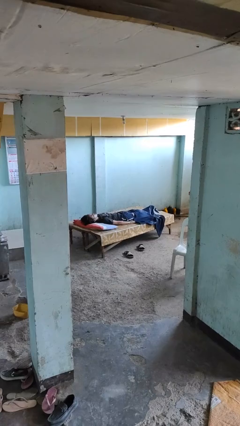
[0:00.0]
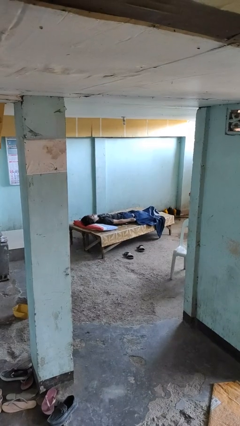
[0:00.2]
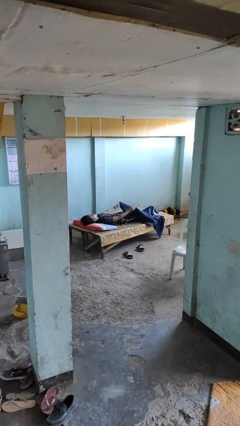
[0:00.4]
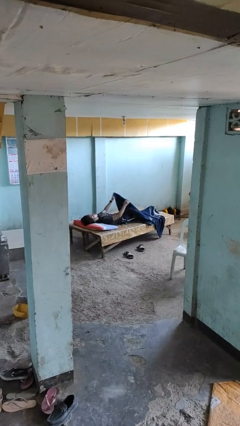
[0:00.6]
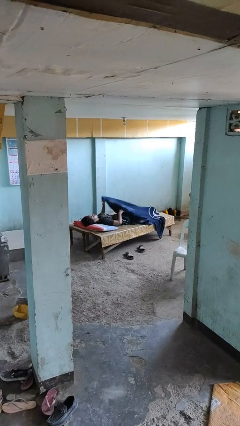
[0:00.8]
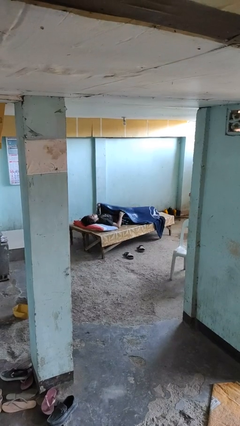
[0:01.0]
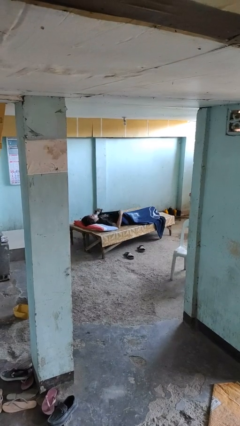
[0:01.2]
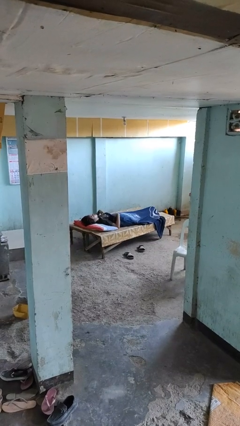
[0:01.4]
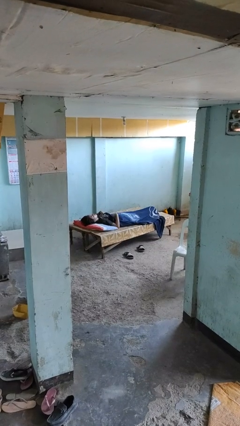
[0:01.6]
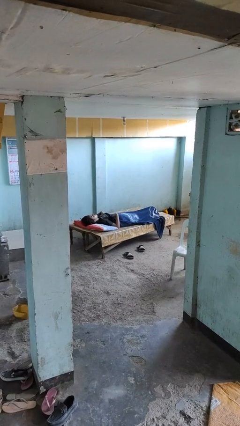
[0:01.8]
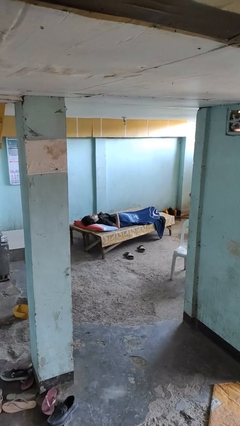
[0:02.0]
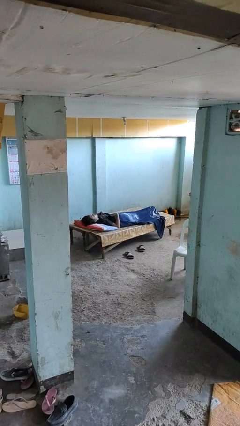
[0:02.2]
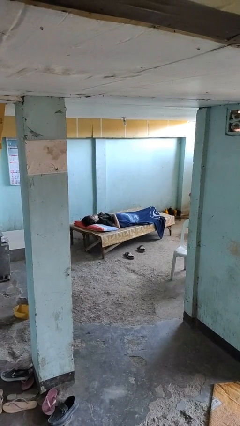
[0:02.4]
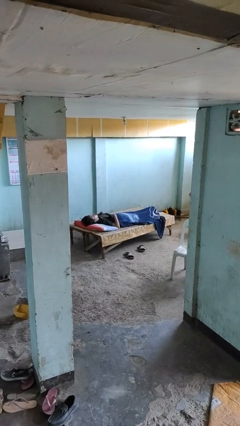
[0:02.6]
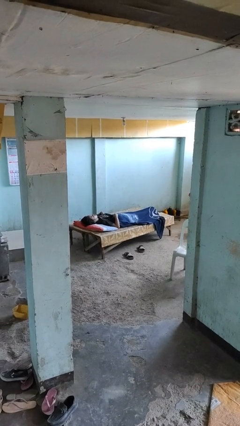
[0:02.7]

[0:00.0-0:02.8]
person covers with blanket

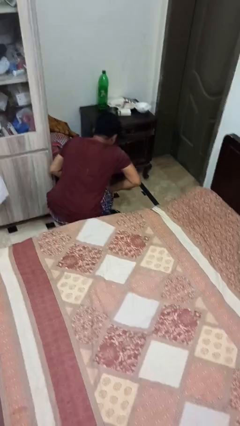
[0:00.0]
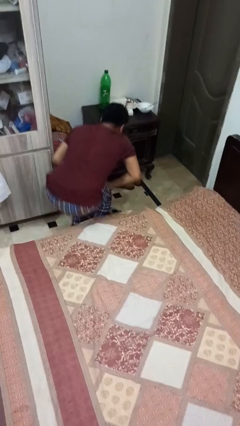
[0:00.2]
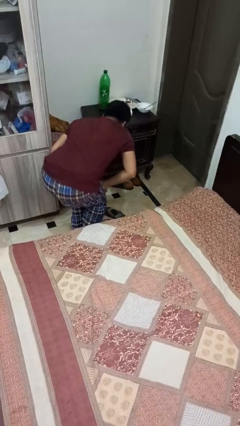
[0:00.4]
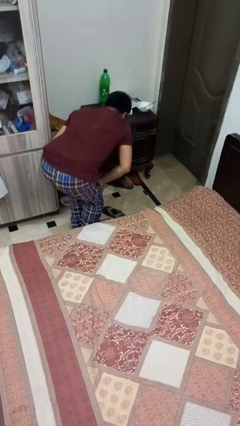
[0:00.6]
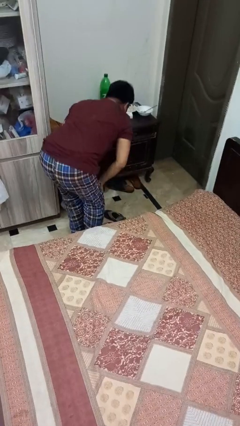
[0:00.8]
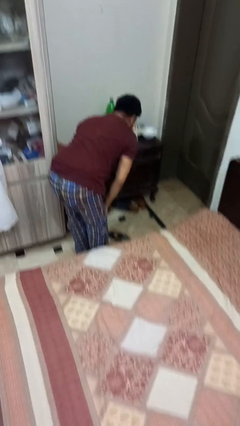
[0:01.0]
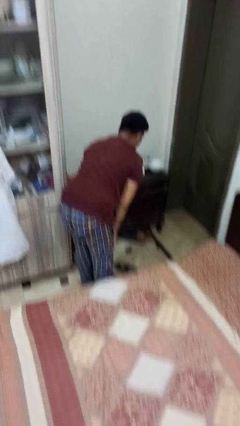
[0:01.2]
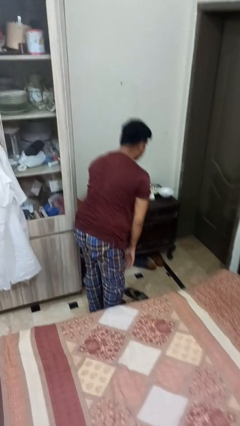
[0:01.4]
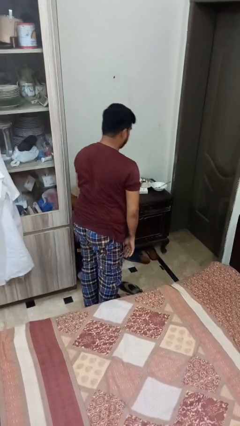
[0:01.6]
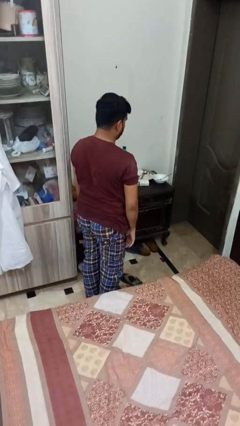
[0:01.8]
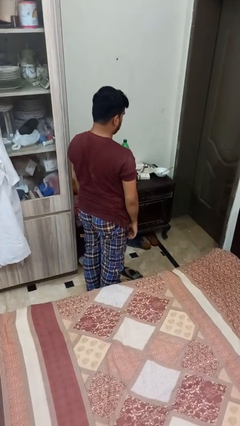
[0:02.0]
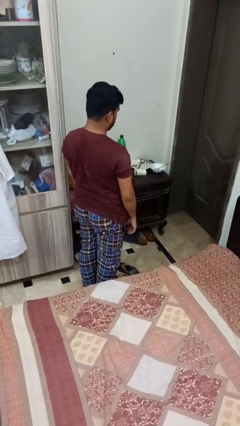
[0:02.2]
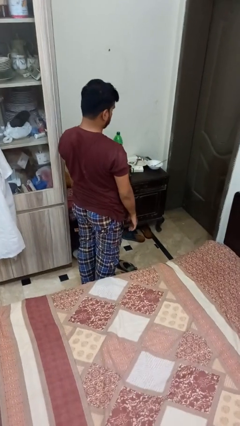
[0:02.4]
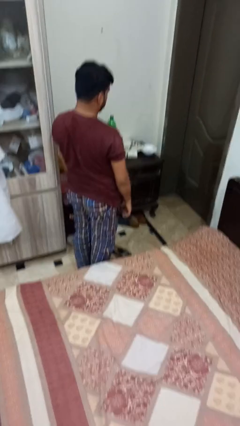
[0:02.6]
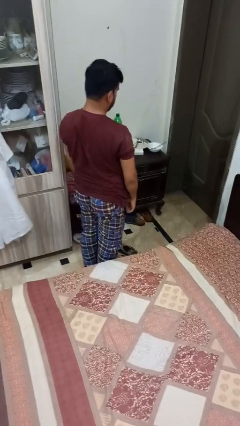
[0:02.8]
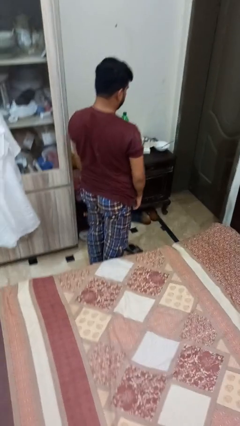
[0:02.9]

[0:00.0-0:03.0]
person stands up from floor

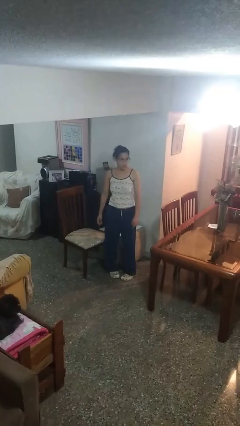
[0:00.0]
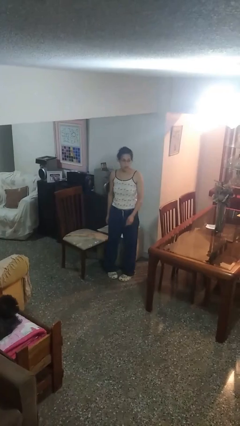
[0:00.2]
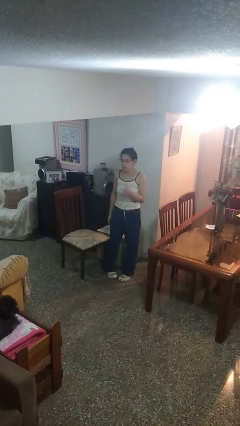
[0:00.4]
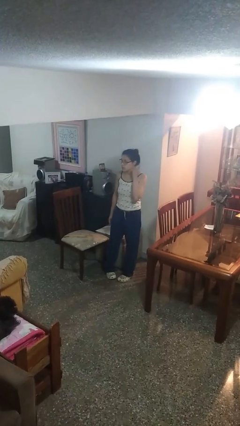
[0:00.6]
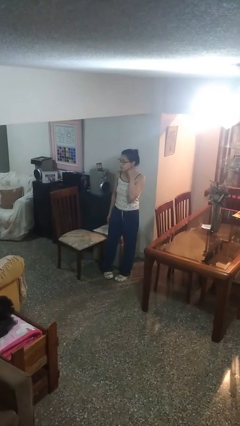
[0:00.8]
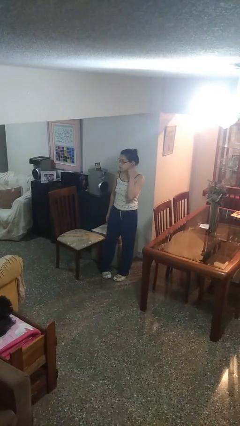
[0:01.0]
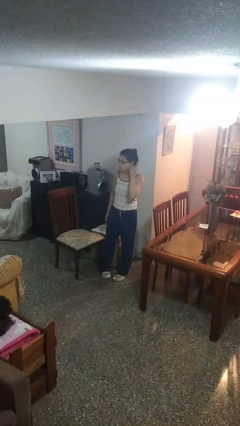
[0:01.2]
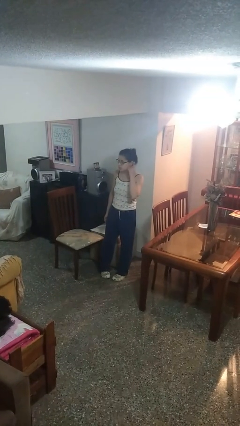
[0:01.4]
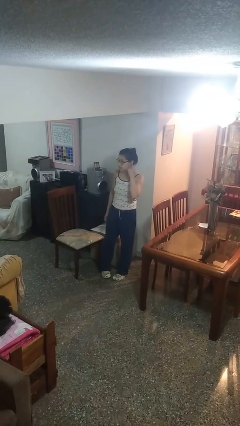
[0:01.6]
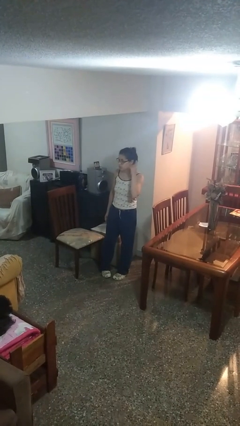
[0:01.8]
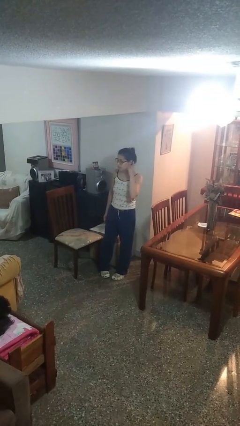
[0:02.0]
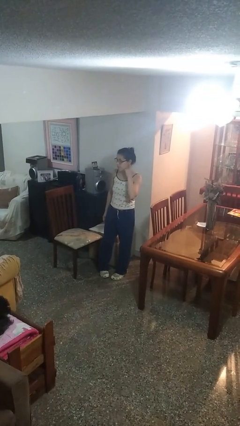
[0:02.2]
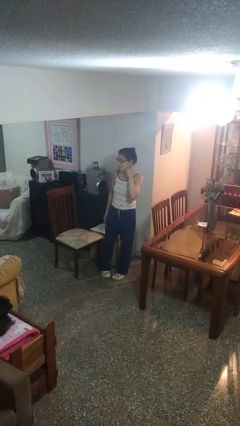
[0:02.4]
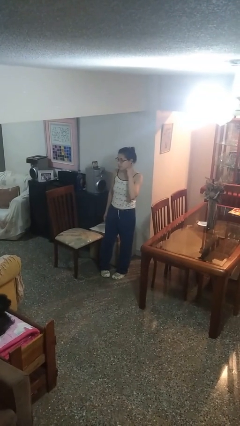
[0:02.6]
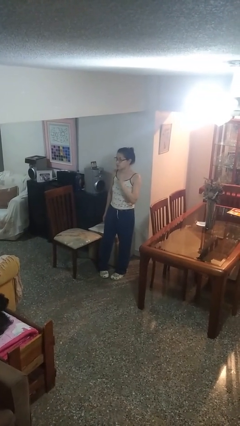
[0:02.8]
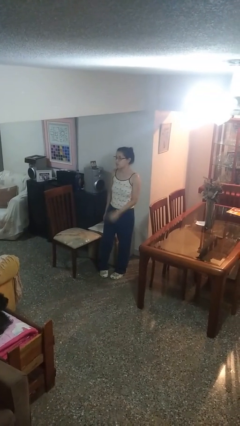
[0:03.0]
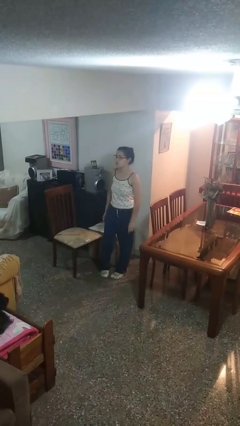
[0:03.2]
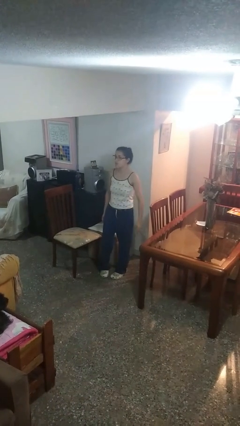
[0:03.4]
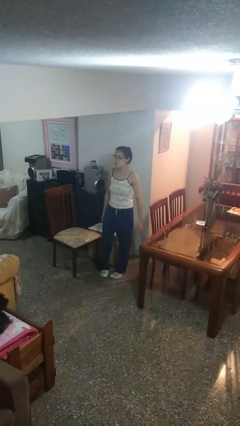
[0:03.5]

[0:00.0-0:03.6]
person gestures listen closely

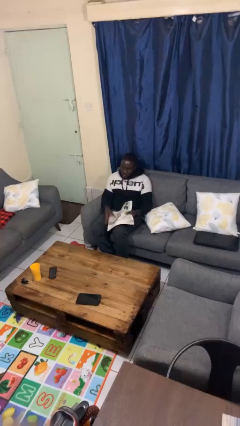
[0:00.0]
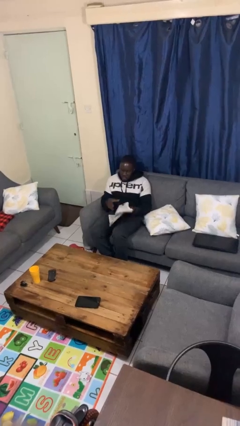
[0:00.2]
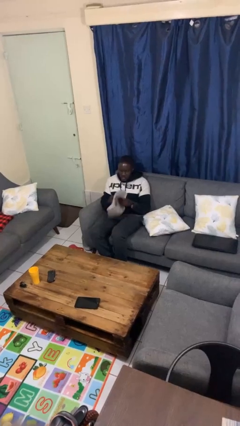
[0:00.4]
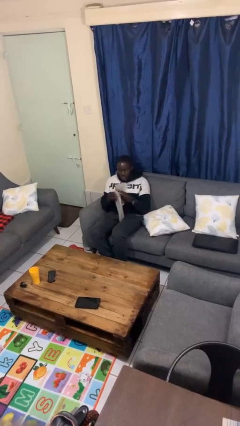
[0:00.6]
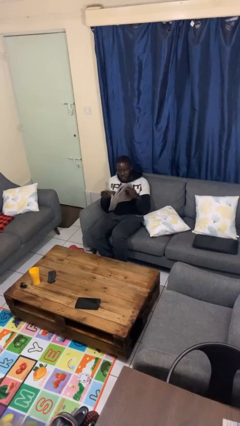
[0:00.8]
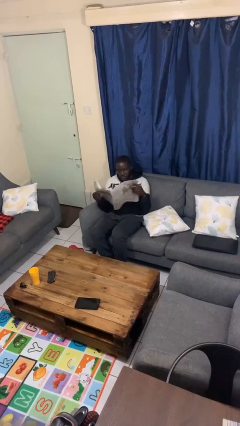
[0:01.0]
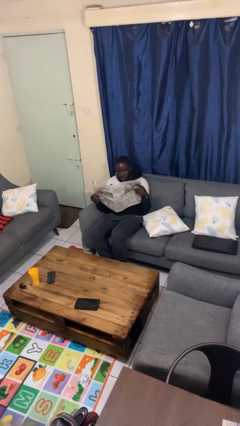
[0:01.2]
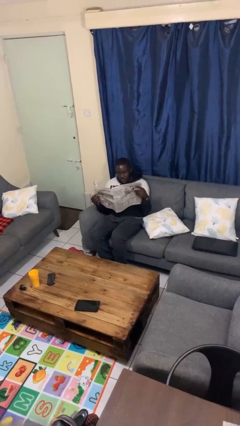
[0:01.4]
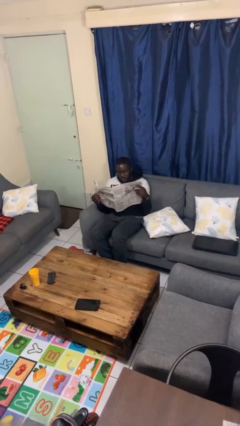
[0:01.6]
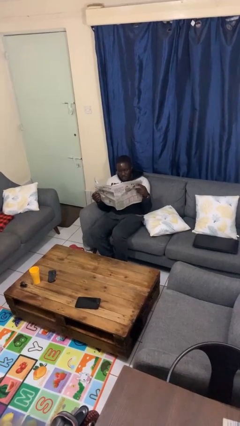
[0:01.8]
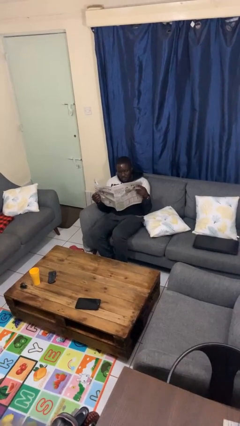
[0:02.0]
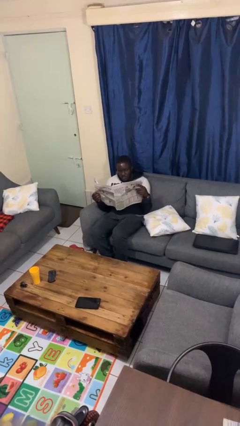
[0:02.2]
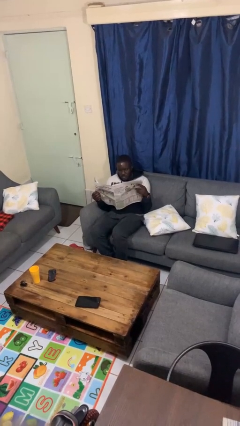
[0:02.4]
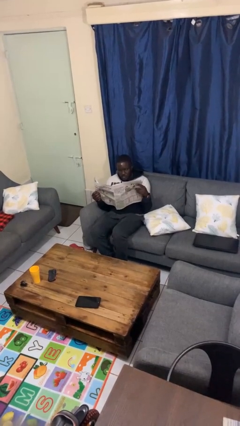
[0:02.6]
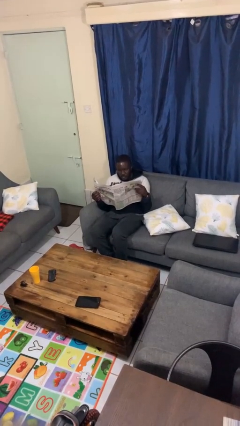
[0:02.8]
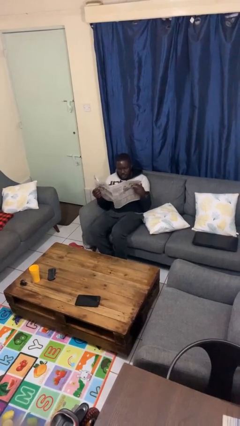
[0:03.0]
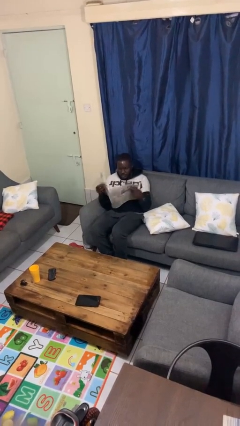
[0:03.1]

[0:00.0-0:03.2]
person reads newspaper

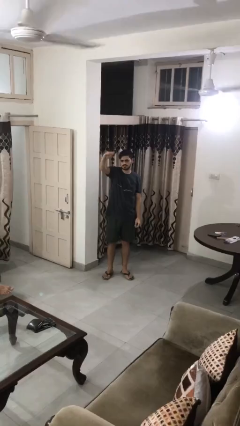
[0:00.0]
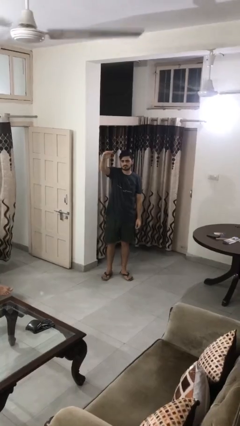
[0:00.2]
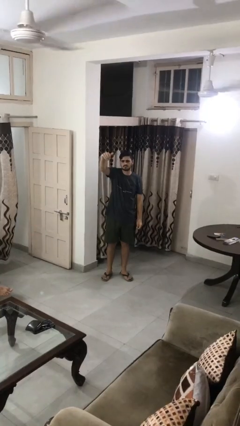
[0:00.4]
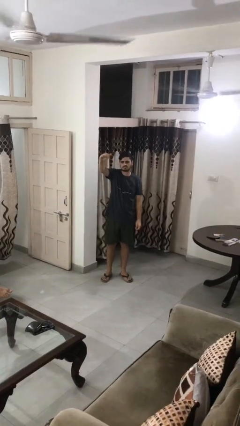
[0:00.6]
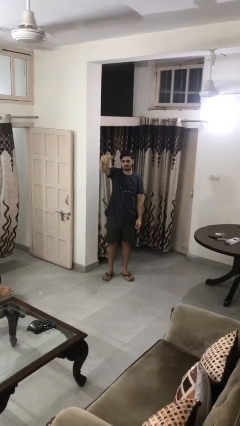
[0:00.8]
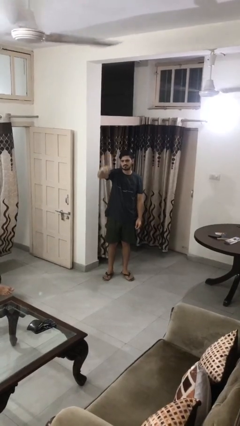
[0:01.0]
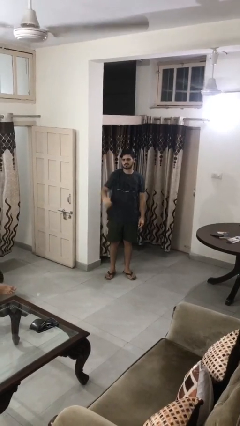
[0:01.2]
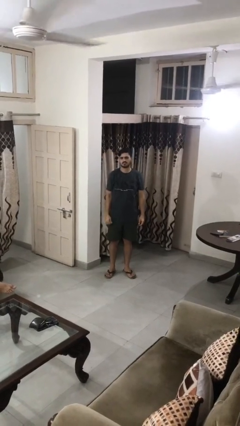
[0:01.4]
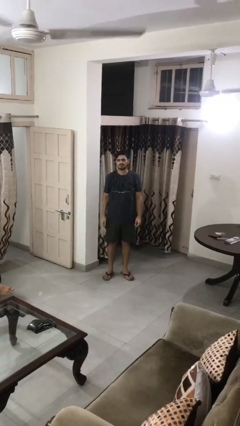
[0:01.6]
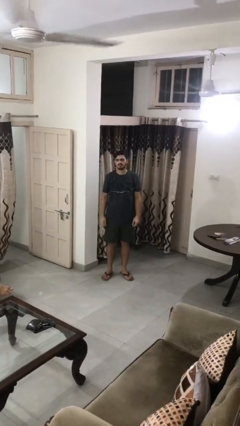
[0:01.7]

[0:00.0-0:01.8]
person gestures come here

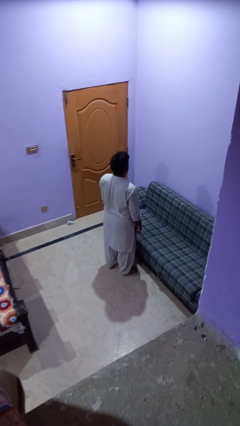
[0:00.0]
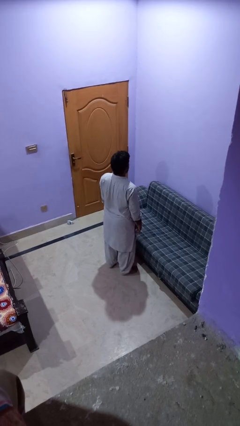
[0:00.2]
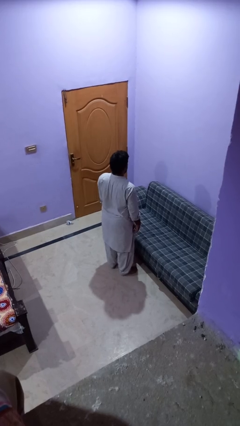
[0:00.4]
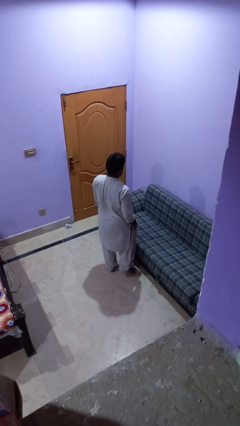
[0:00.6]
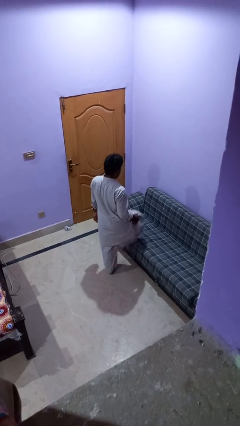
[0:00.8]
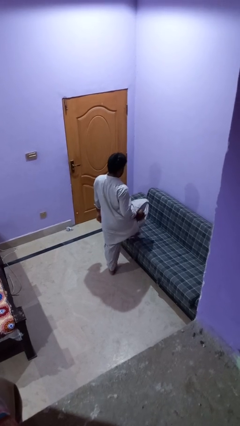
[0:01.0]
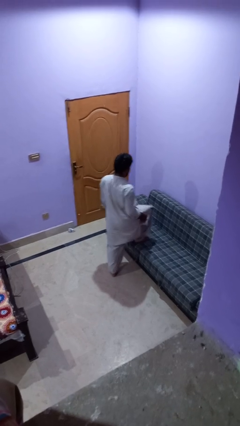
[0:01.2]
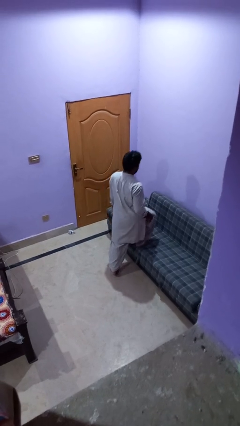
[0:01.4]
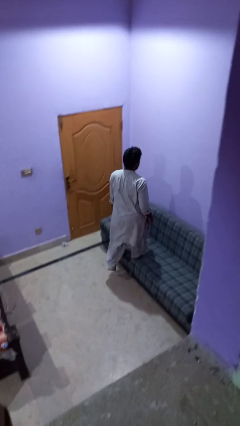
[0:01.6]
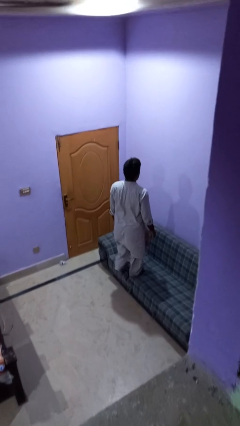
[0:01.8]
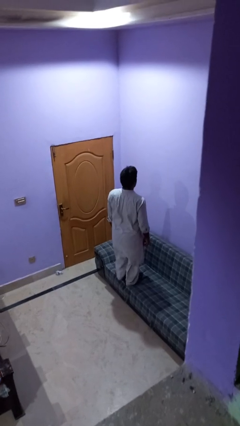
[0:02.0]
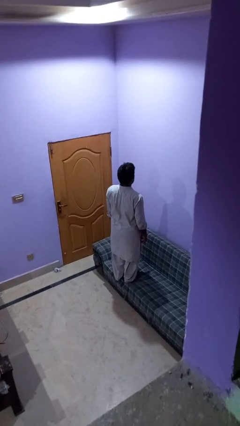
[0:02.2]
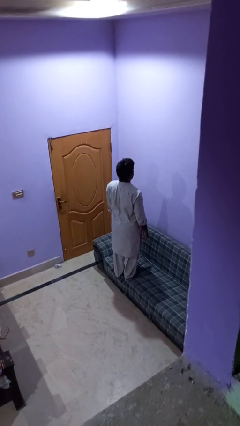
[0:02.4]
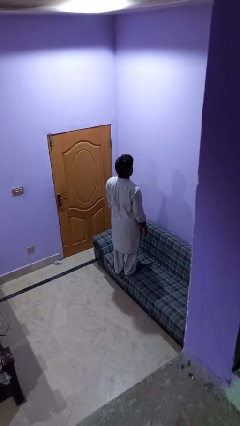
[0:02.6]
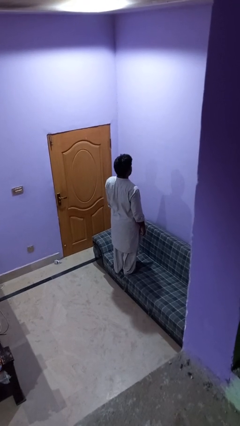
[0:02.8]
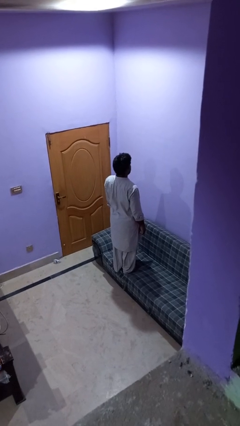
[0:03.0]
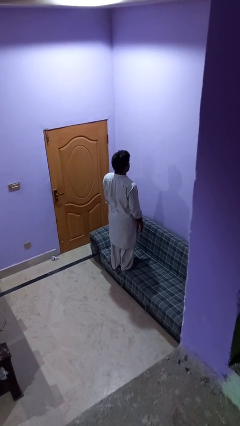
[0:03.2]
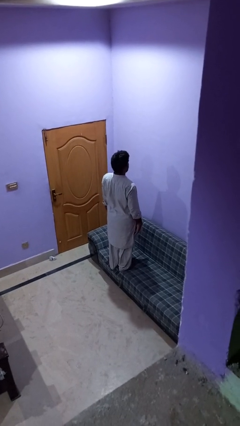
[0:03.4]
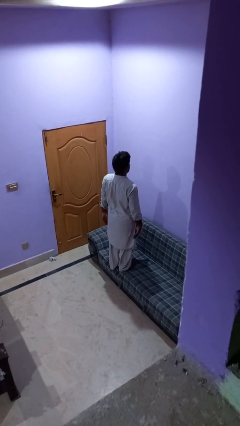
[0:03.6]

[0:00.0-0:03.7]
person climbs on couch
